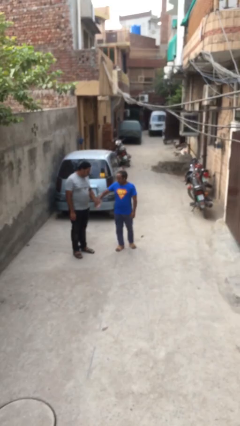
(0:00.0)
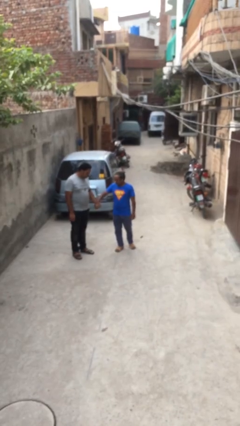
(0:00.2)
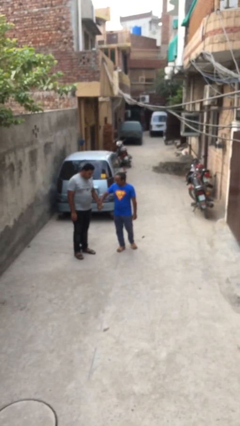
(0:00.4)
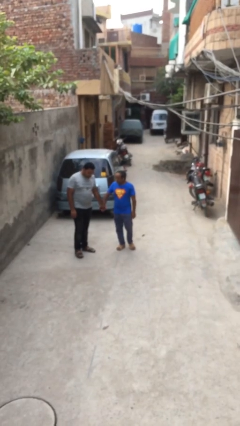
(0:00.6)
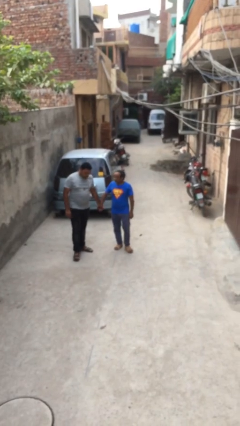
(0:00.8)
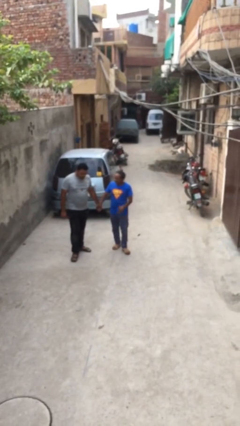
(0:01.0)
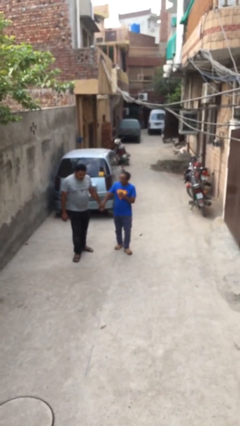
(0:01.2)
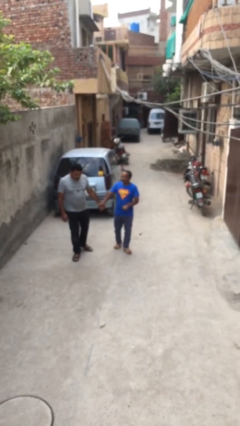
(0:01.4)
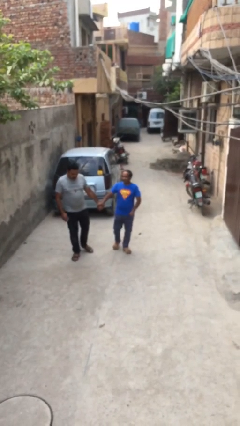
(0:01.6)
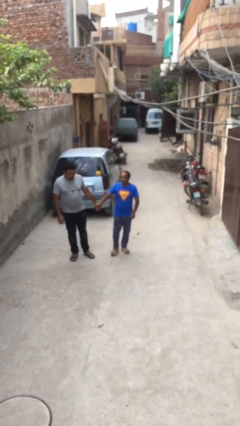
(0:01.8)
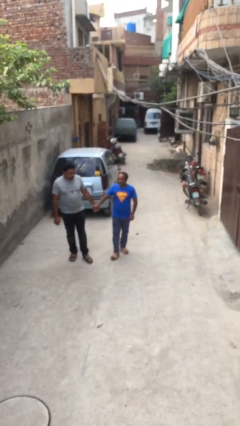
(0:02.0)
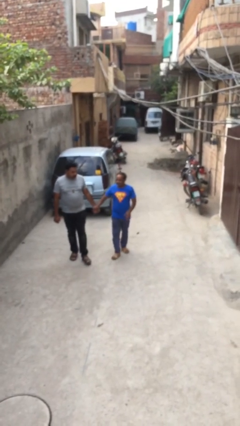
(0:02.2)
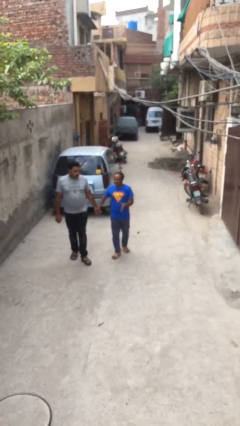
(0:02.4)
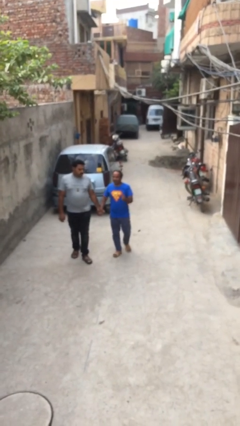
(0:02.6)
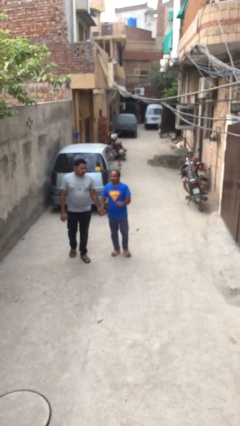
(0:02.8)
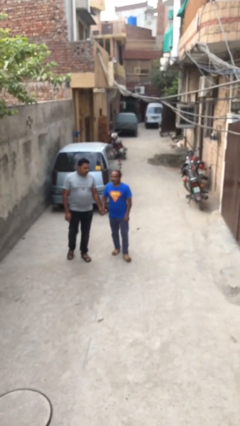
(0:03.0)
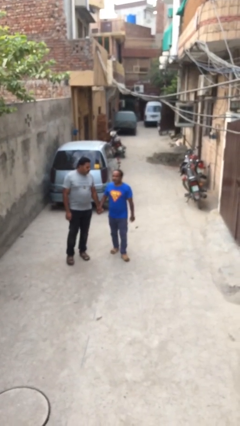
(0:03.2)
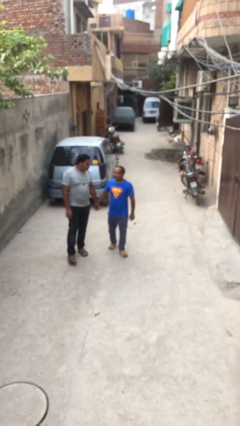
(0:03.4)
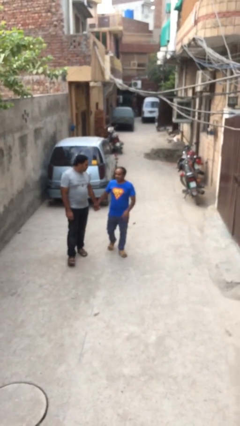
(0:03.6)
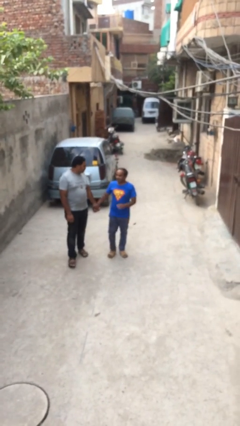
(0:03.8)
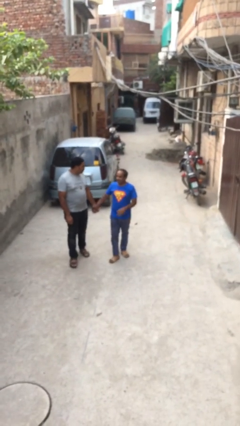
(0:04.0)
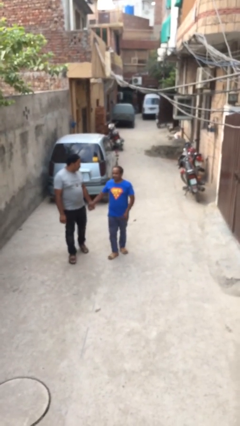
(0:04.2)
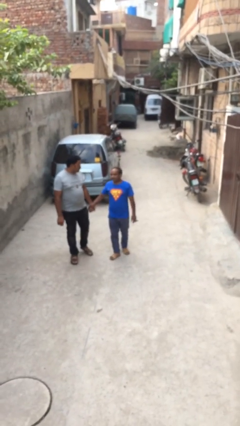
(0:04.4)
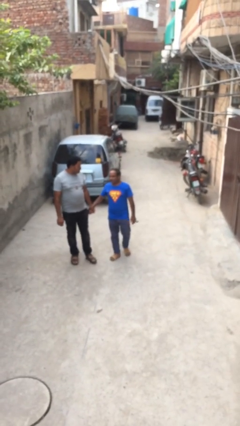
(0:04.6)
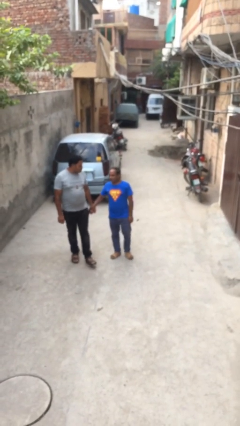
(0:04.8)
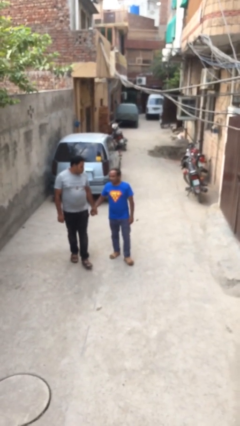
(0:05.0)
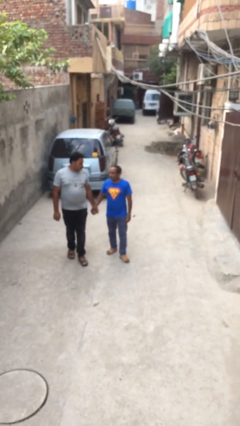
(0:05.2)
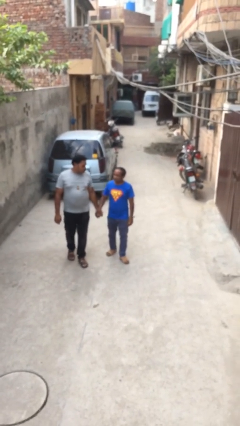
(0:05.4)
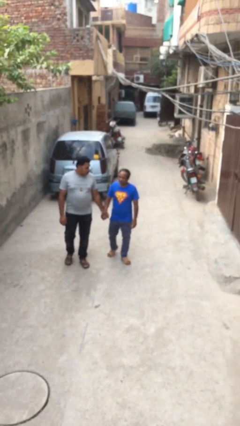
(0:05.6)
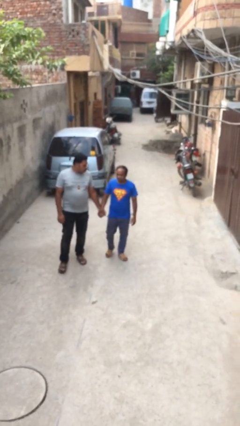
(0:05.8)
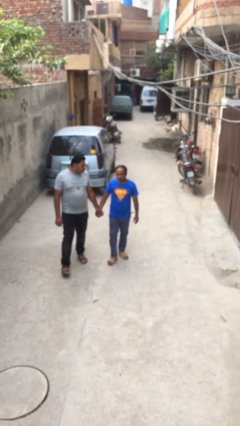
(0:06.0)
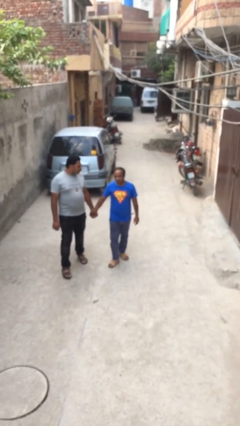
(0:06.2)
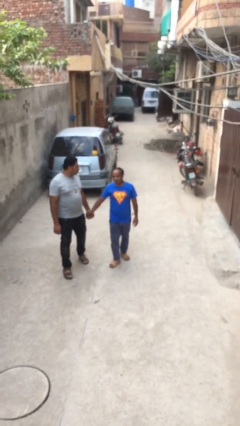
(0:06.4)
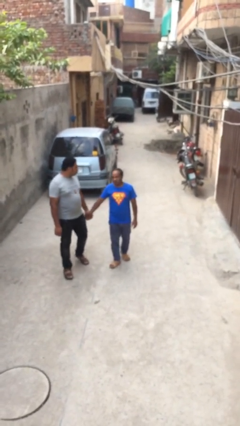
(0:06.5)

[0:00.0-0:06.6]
person holds hand

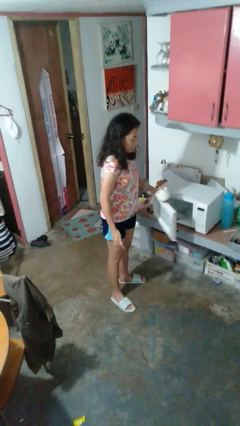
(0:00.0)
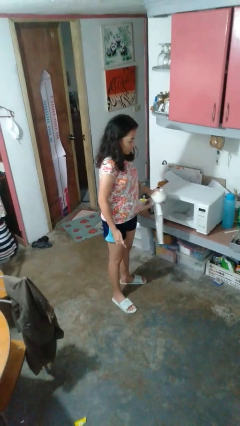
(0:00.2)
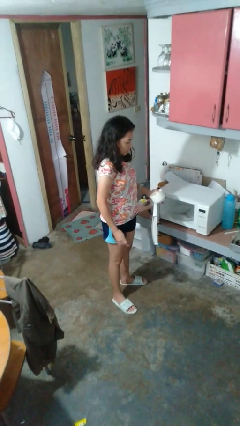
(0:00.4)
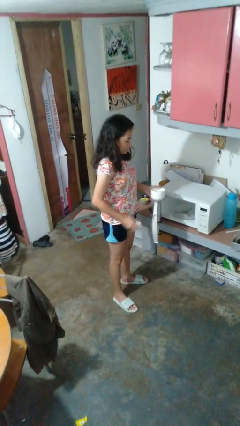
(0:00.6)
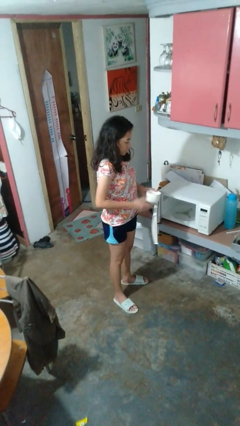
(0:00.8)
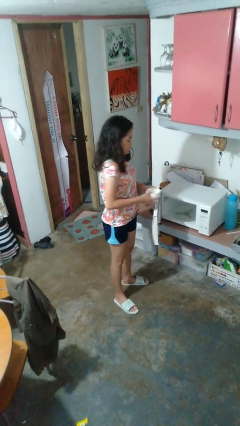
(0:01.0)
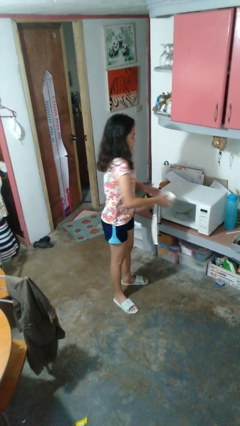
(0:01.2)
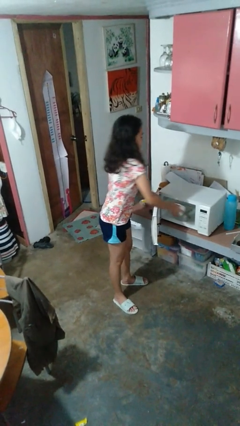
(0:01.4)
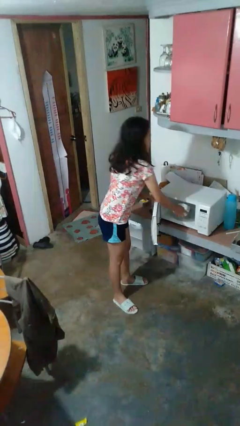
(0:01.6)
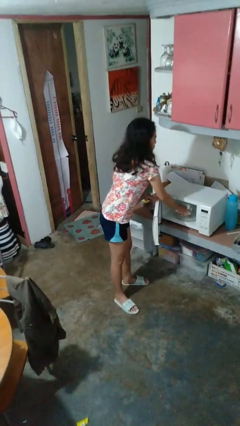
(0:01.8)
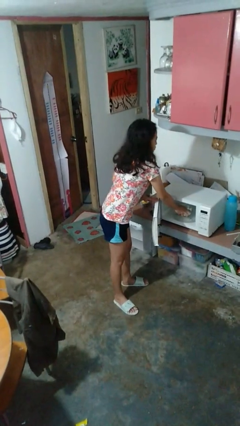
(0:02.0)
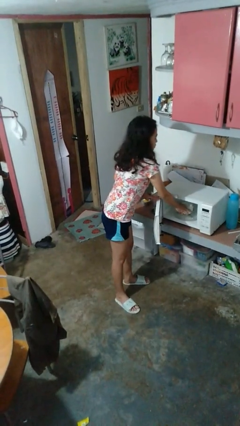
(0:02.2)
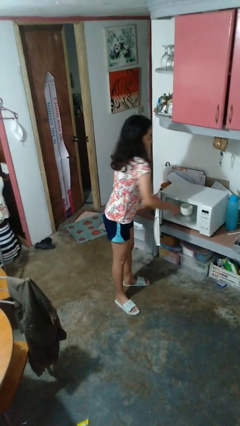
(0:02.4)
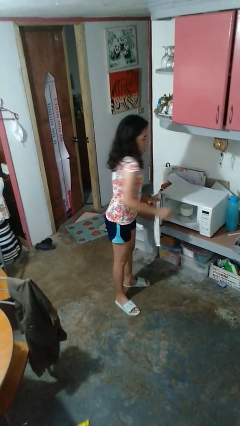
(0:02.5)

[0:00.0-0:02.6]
person puts object into microwave

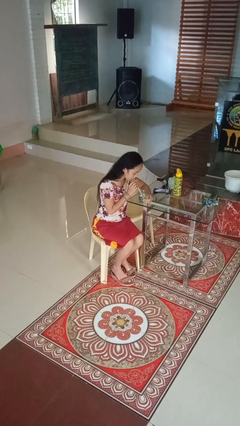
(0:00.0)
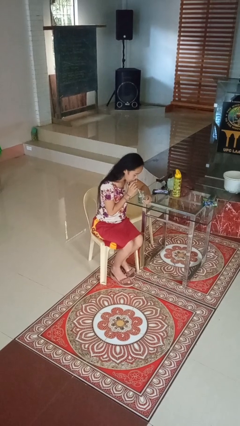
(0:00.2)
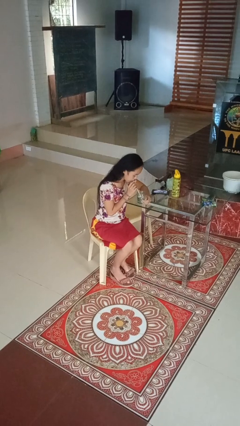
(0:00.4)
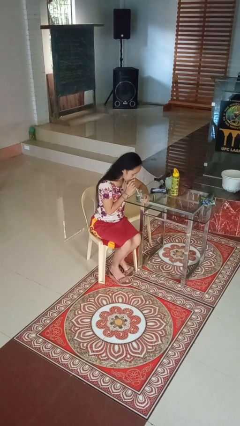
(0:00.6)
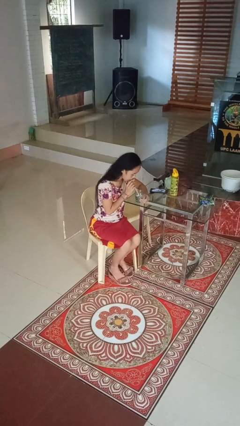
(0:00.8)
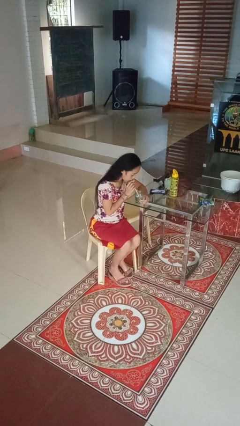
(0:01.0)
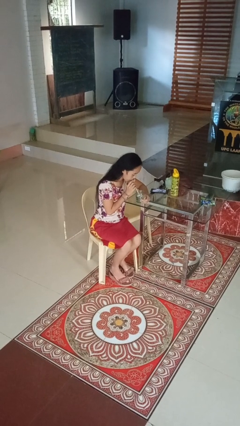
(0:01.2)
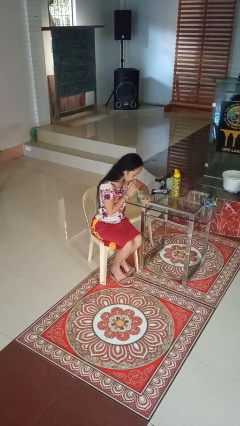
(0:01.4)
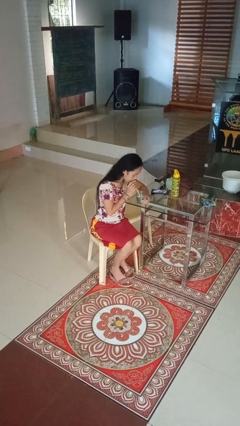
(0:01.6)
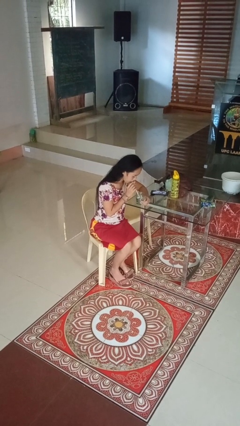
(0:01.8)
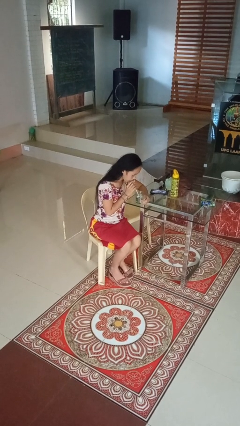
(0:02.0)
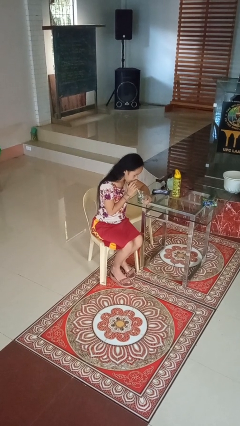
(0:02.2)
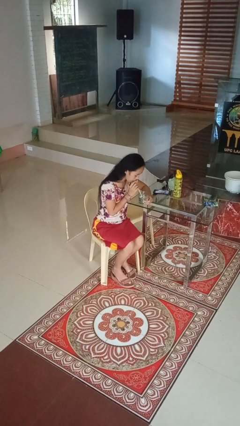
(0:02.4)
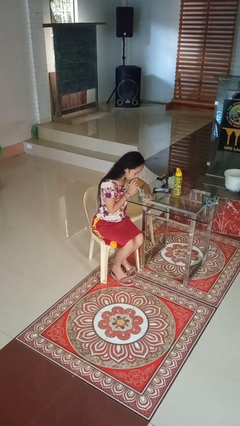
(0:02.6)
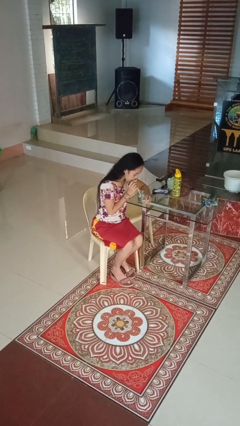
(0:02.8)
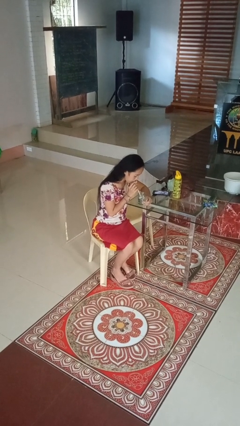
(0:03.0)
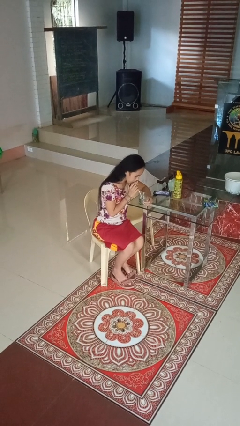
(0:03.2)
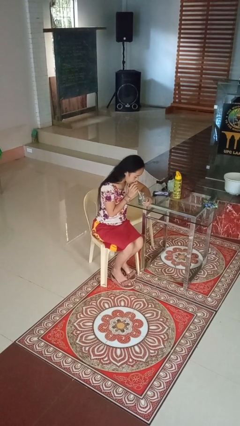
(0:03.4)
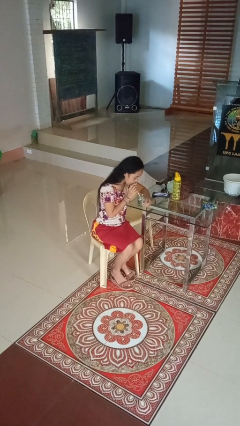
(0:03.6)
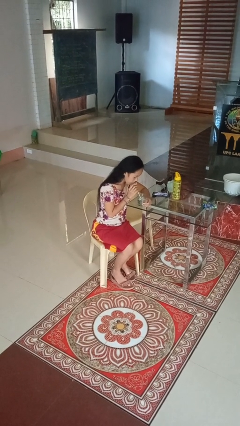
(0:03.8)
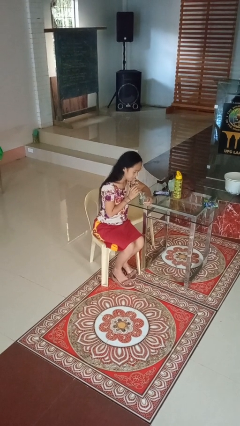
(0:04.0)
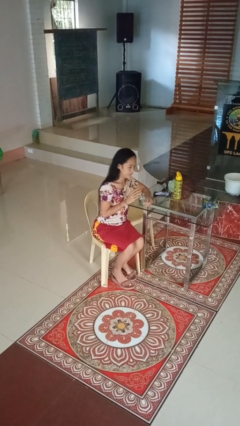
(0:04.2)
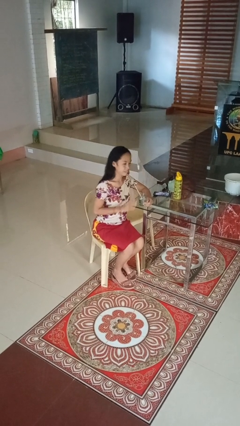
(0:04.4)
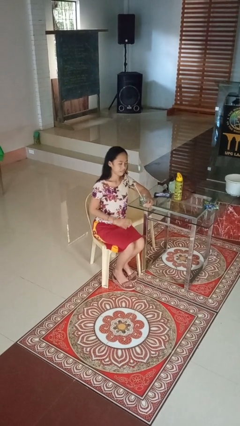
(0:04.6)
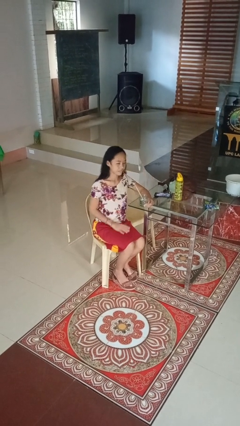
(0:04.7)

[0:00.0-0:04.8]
person drinks from straw

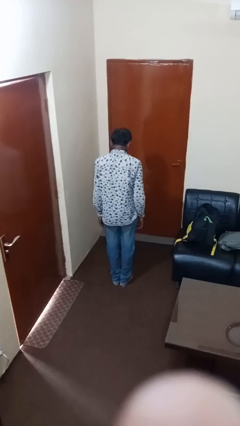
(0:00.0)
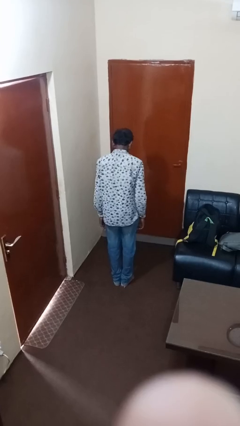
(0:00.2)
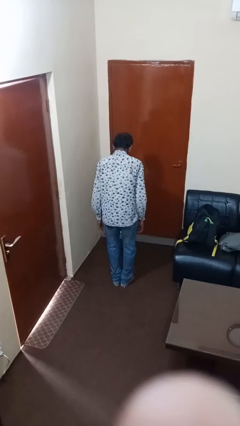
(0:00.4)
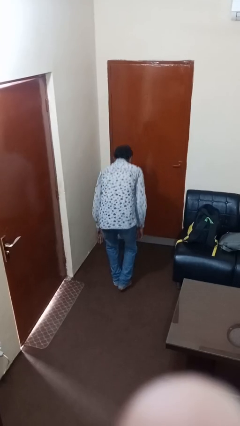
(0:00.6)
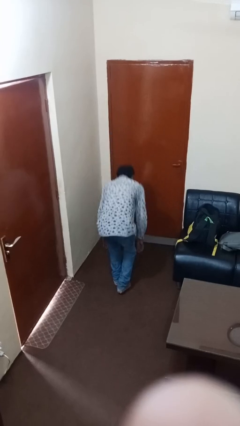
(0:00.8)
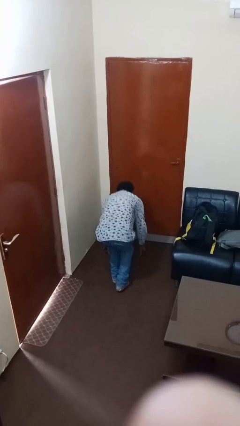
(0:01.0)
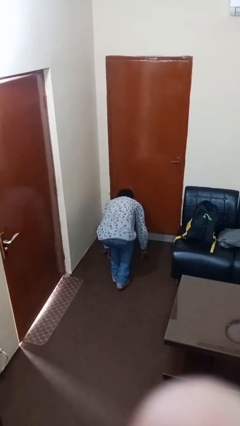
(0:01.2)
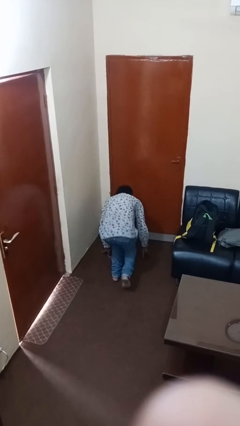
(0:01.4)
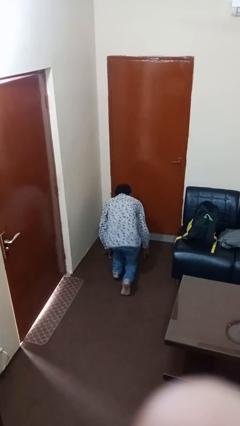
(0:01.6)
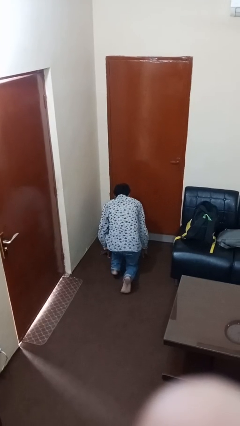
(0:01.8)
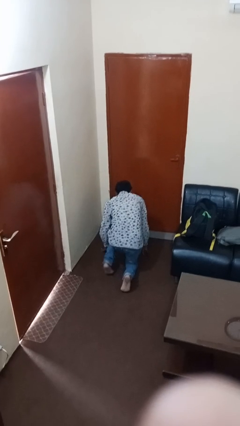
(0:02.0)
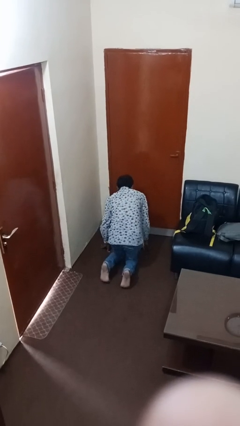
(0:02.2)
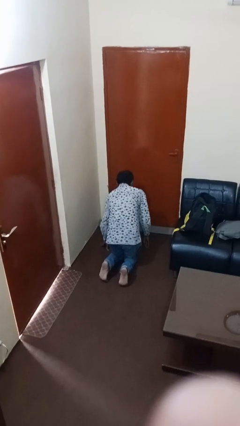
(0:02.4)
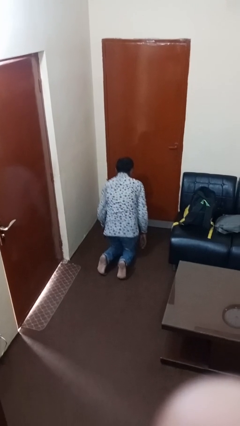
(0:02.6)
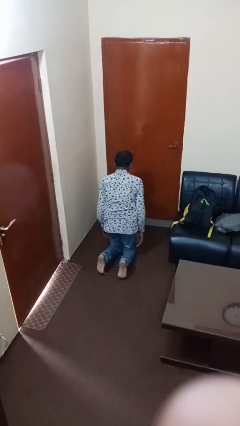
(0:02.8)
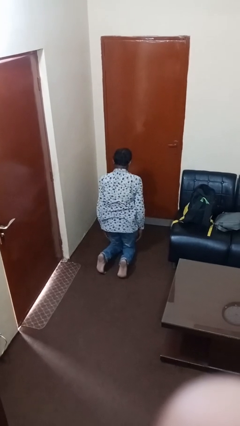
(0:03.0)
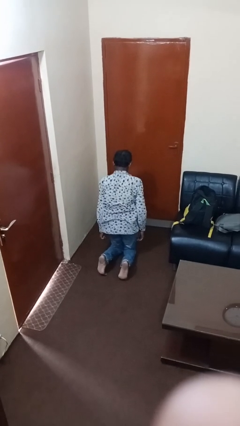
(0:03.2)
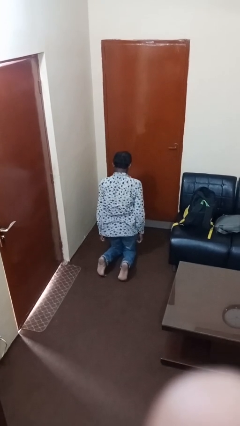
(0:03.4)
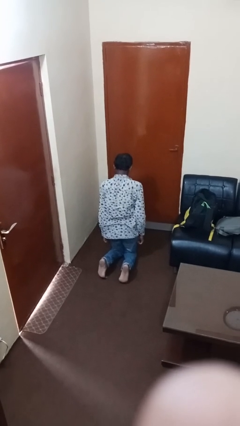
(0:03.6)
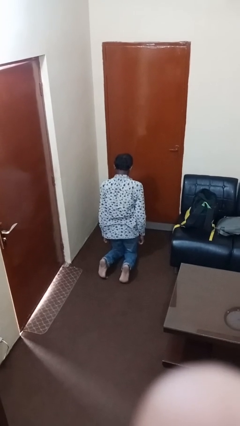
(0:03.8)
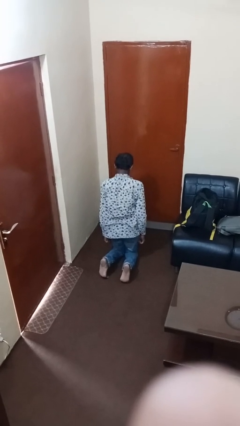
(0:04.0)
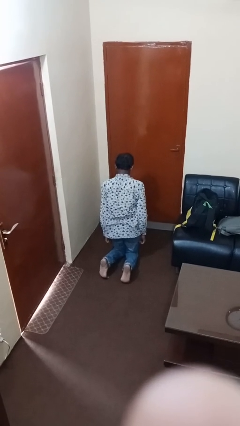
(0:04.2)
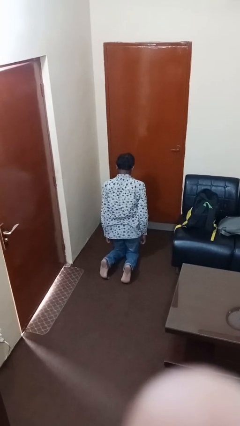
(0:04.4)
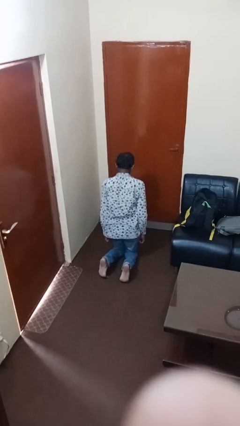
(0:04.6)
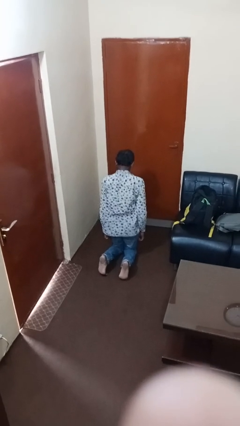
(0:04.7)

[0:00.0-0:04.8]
person kneels
